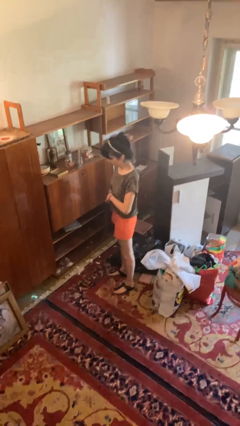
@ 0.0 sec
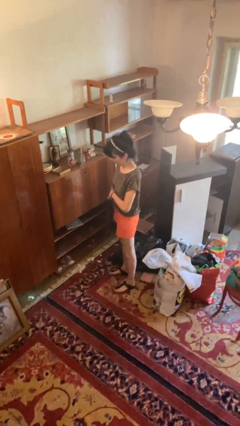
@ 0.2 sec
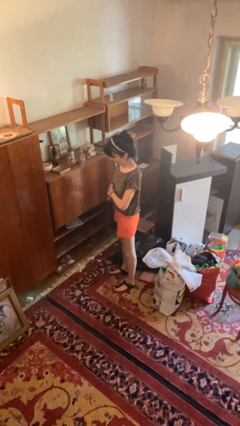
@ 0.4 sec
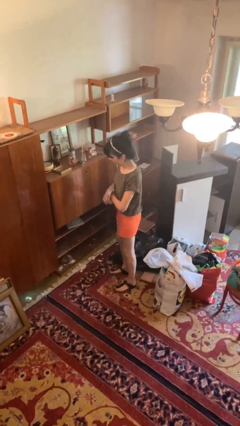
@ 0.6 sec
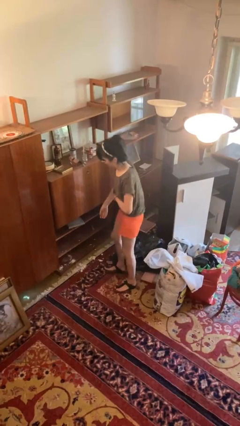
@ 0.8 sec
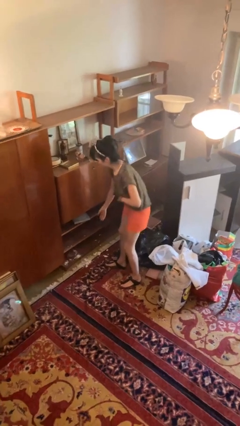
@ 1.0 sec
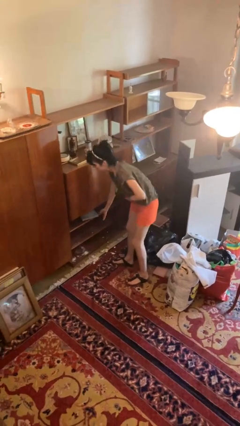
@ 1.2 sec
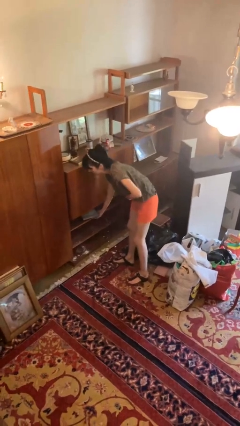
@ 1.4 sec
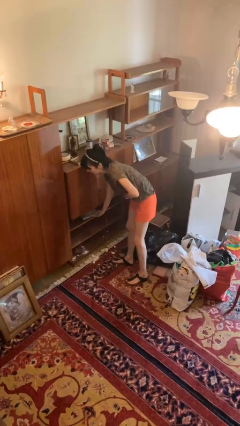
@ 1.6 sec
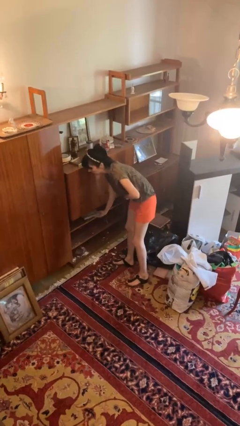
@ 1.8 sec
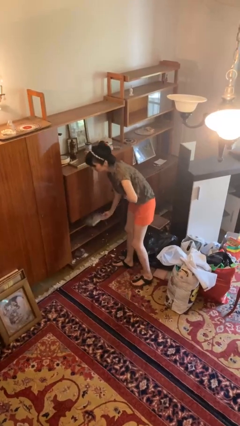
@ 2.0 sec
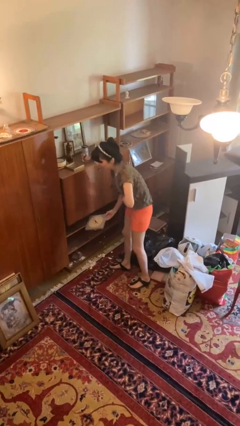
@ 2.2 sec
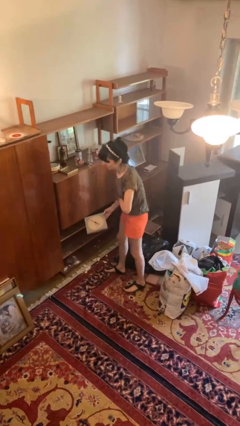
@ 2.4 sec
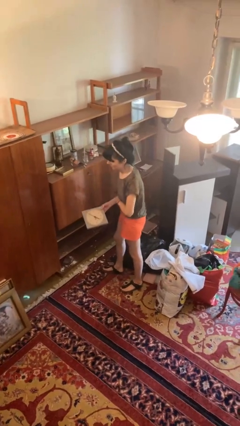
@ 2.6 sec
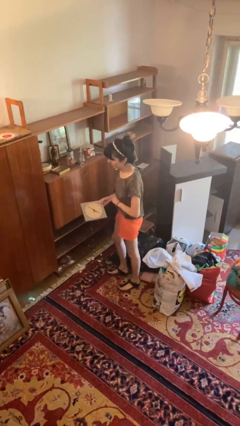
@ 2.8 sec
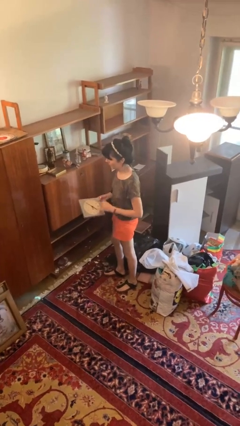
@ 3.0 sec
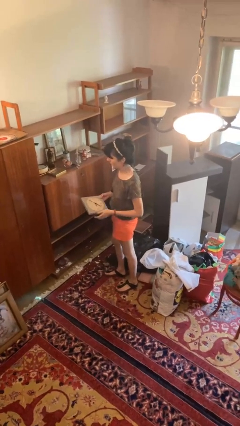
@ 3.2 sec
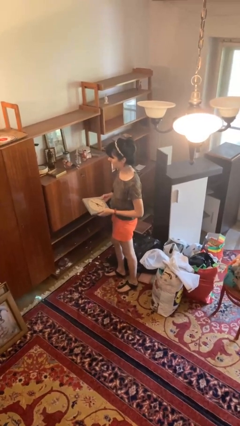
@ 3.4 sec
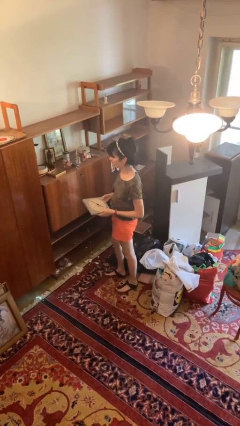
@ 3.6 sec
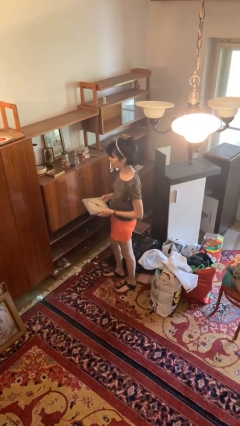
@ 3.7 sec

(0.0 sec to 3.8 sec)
person picks up object from cabinet

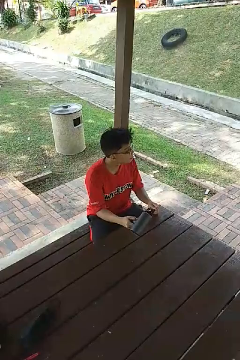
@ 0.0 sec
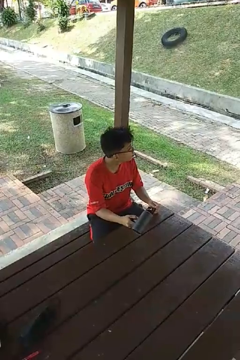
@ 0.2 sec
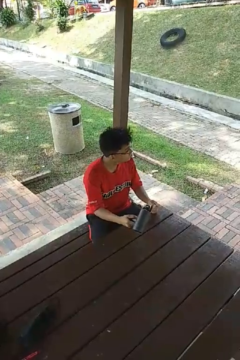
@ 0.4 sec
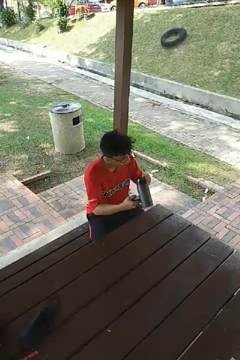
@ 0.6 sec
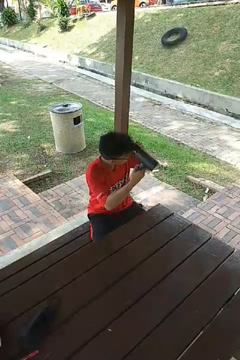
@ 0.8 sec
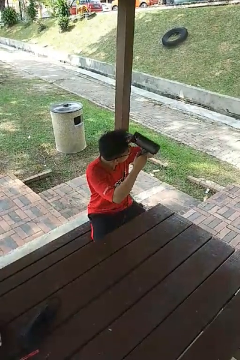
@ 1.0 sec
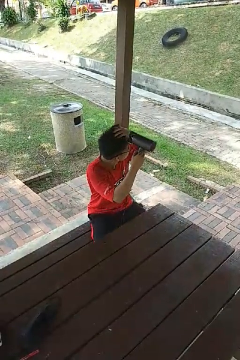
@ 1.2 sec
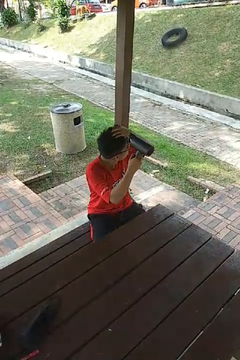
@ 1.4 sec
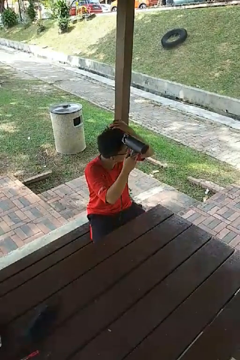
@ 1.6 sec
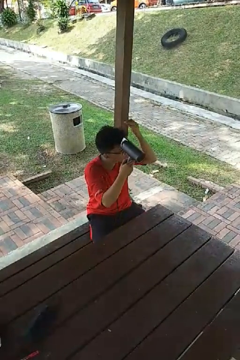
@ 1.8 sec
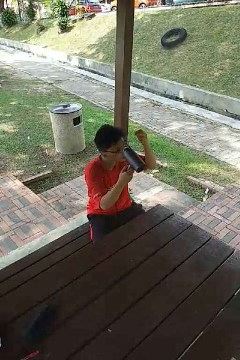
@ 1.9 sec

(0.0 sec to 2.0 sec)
person dries hair with hairdryer

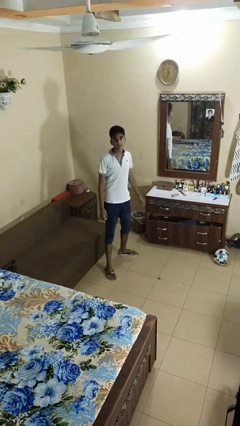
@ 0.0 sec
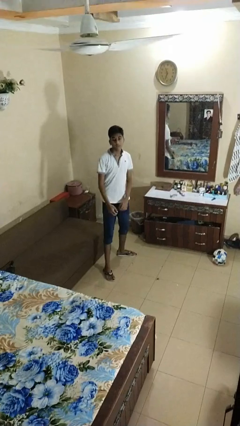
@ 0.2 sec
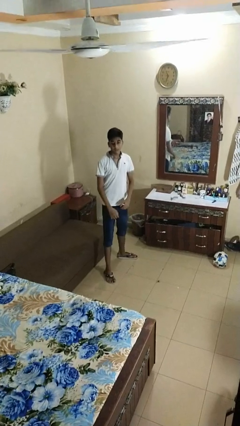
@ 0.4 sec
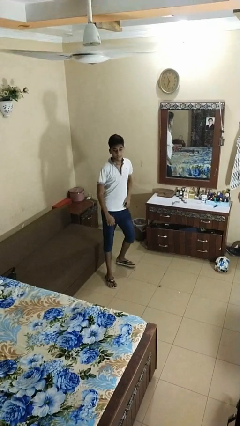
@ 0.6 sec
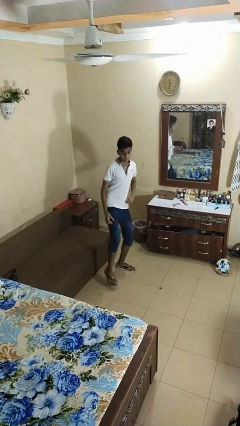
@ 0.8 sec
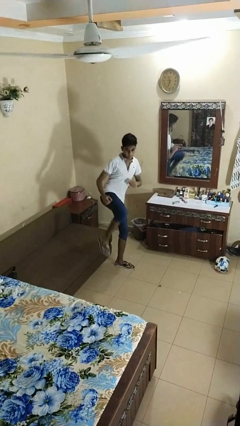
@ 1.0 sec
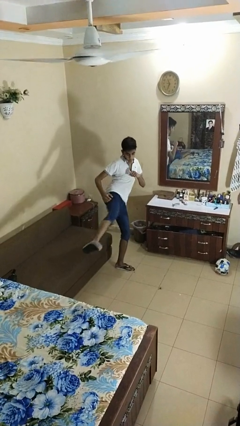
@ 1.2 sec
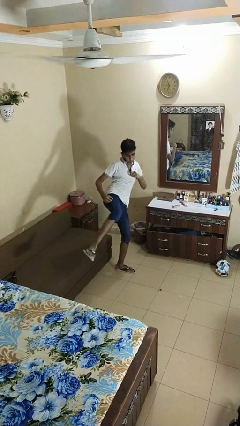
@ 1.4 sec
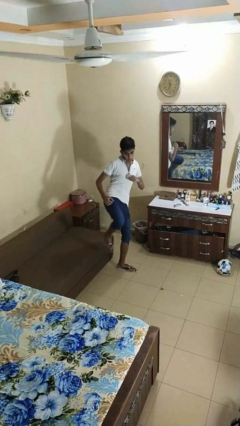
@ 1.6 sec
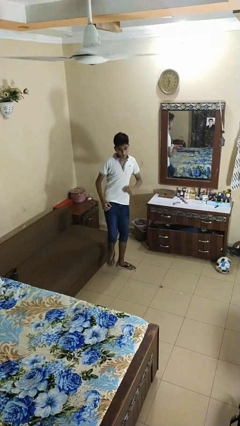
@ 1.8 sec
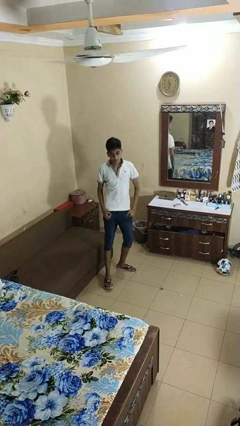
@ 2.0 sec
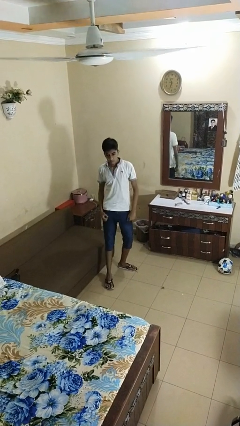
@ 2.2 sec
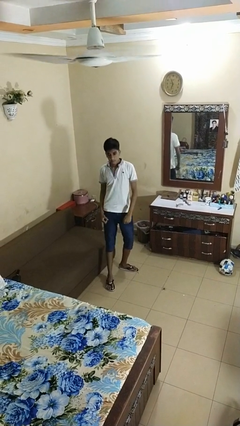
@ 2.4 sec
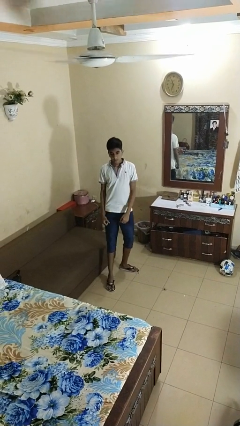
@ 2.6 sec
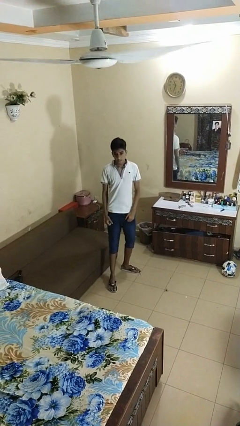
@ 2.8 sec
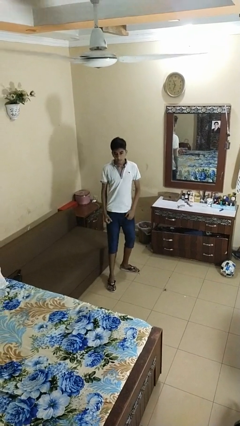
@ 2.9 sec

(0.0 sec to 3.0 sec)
person karate kicks

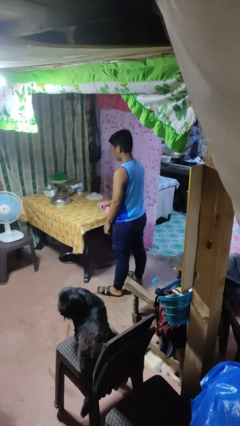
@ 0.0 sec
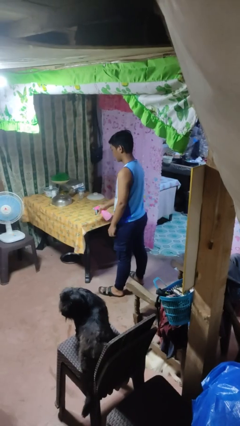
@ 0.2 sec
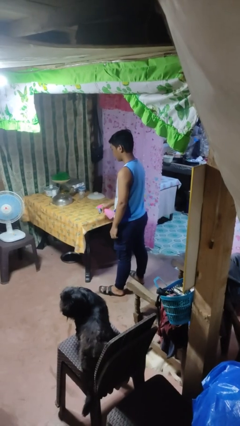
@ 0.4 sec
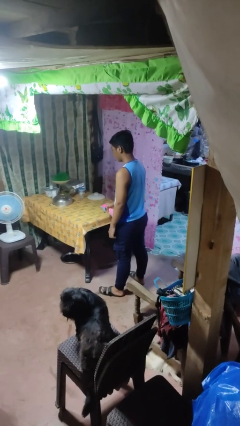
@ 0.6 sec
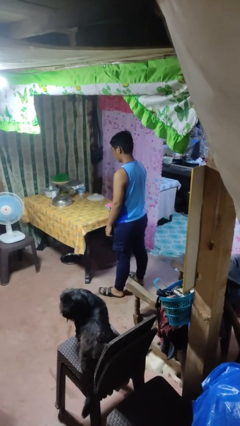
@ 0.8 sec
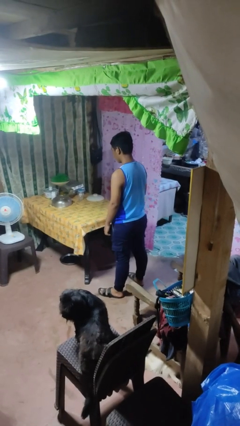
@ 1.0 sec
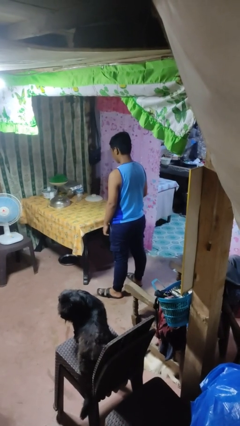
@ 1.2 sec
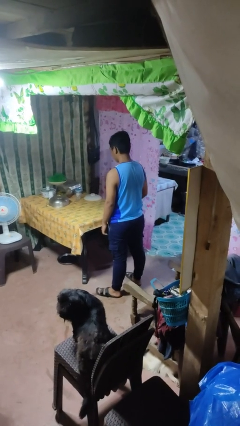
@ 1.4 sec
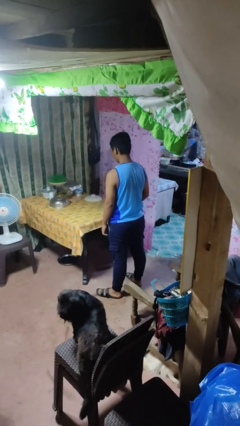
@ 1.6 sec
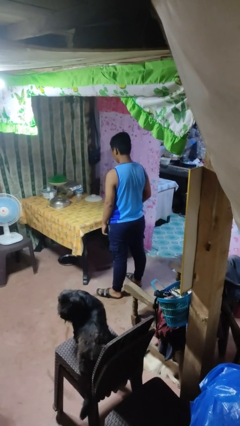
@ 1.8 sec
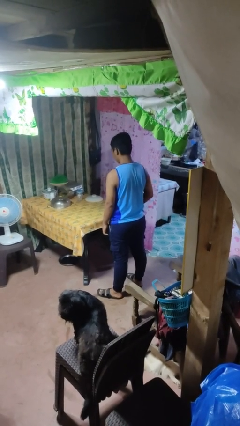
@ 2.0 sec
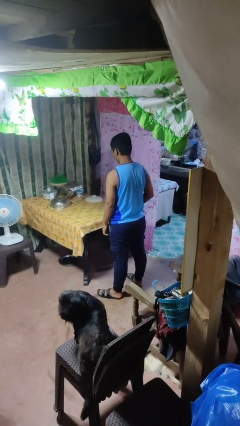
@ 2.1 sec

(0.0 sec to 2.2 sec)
person sprays from bottle

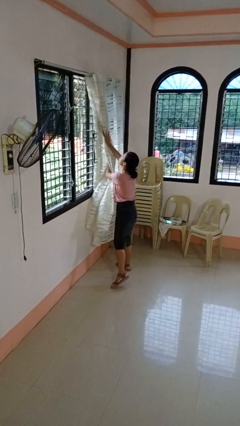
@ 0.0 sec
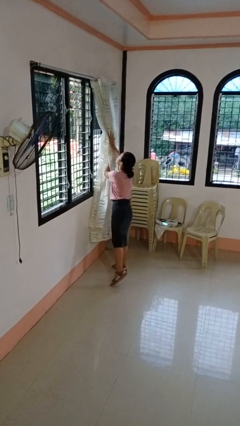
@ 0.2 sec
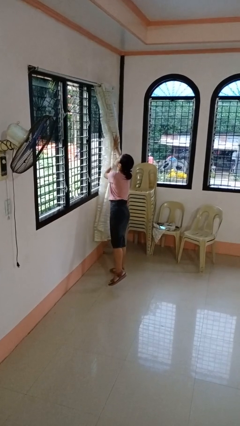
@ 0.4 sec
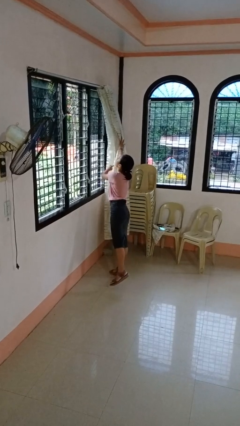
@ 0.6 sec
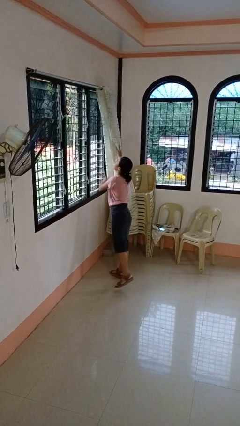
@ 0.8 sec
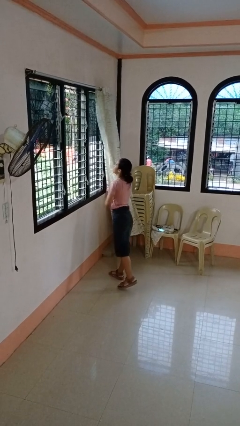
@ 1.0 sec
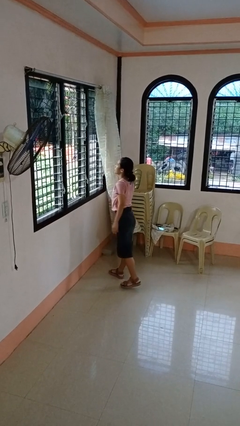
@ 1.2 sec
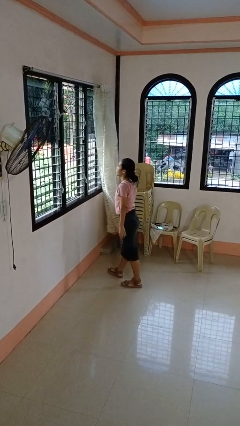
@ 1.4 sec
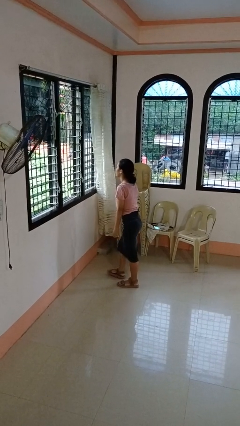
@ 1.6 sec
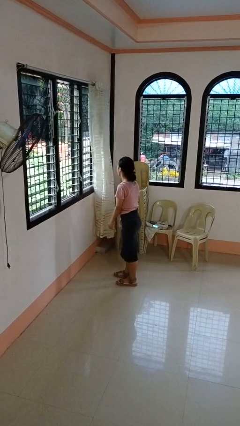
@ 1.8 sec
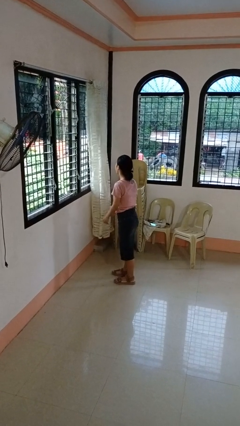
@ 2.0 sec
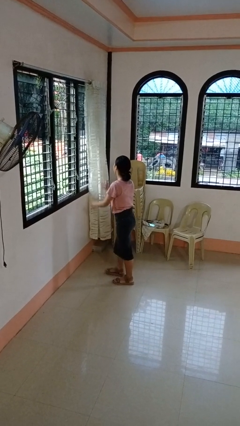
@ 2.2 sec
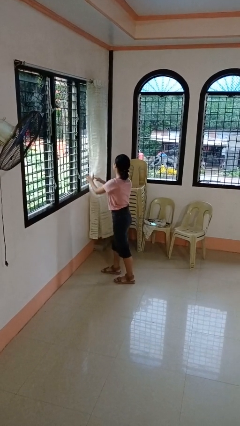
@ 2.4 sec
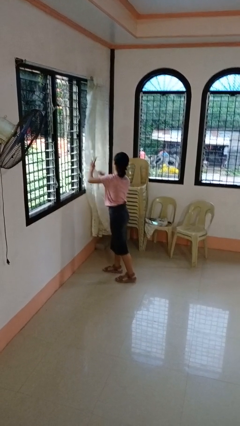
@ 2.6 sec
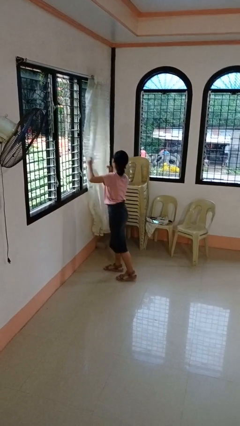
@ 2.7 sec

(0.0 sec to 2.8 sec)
person opens curtains

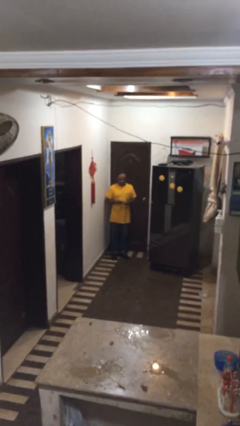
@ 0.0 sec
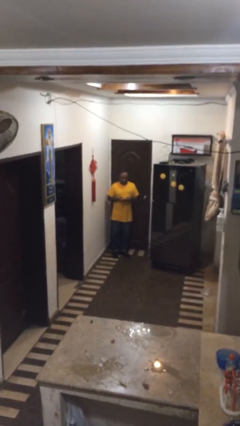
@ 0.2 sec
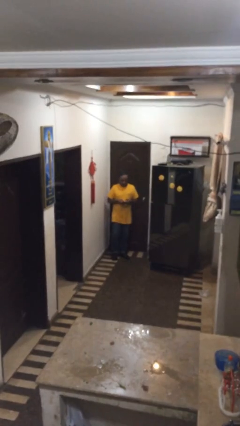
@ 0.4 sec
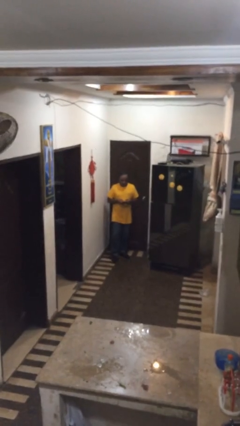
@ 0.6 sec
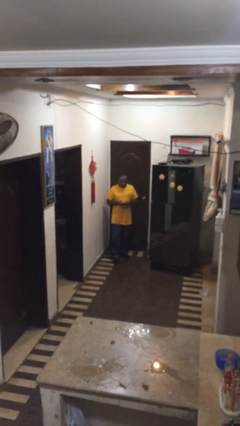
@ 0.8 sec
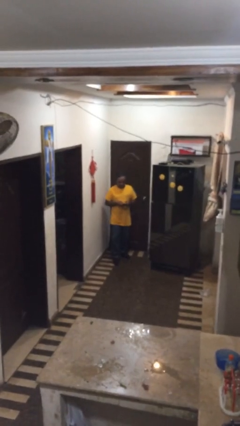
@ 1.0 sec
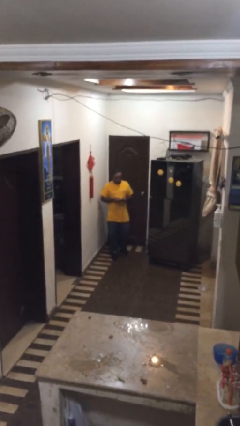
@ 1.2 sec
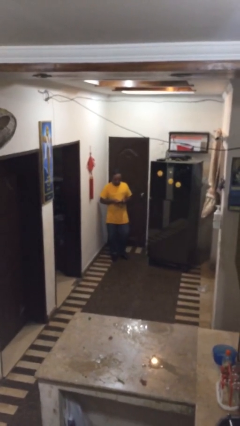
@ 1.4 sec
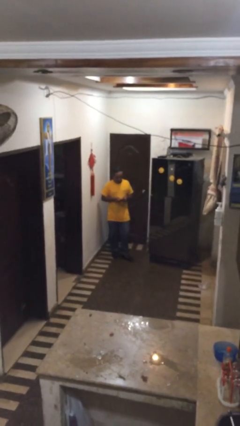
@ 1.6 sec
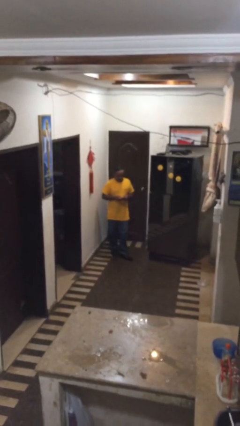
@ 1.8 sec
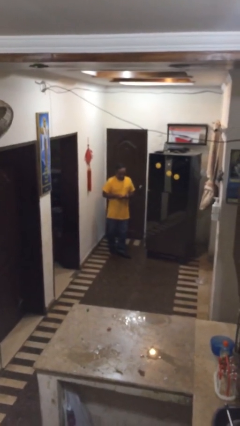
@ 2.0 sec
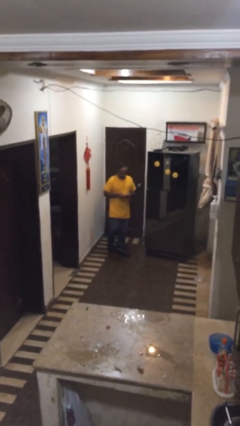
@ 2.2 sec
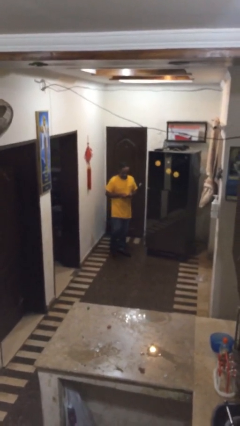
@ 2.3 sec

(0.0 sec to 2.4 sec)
person texts on phone

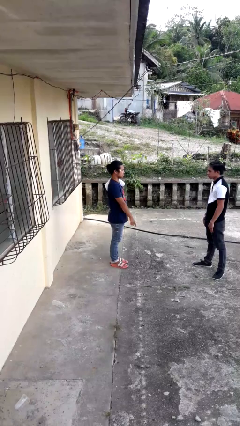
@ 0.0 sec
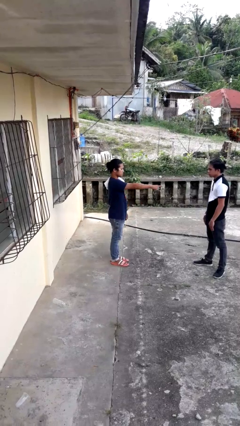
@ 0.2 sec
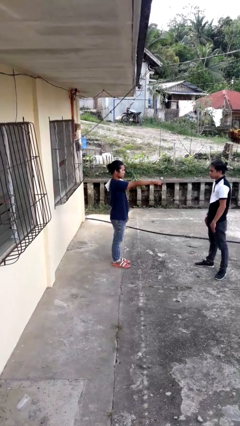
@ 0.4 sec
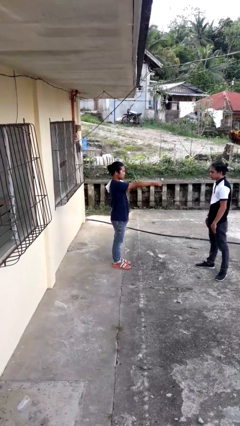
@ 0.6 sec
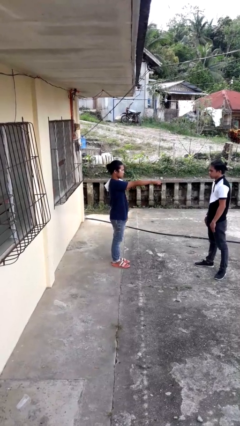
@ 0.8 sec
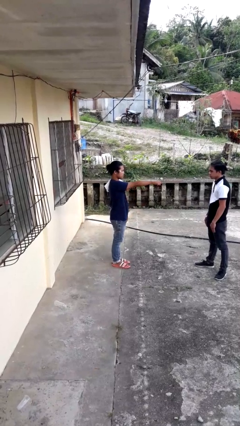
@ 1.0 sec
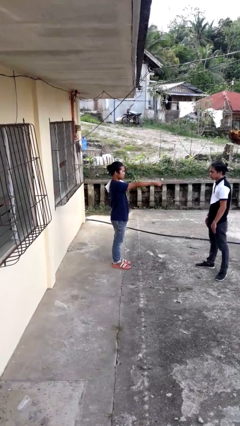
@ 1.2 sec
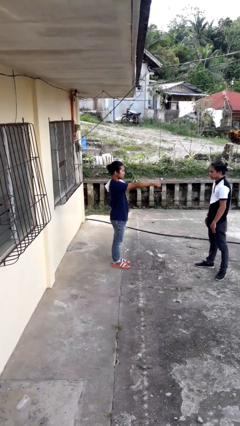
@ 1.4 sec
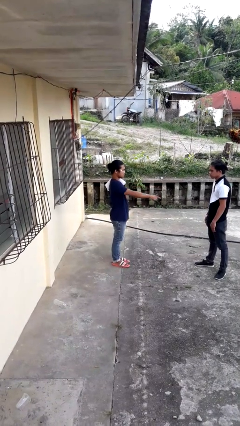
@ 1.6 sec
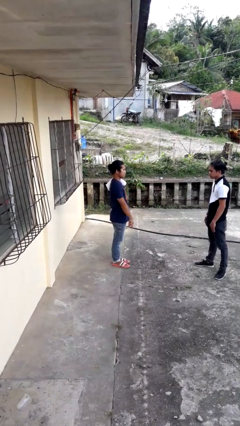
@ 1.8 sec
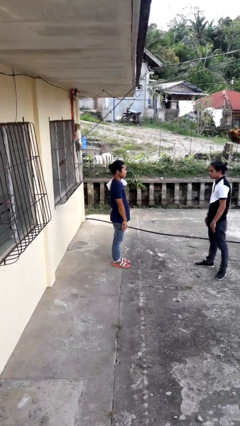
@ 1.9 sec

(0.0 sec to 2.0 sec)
person points at person
